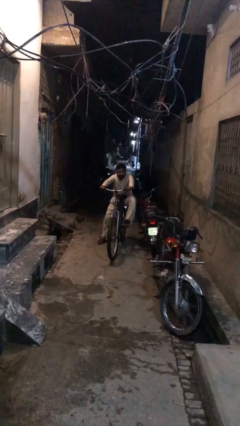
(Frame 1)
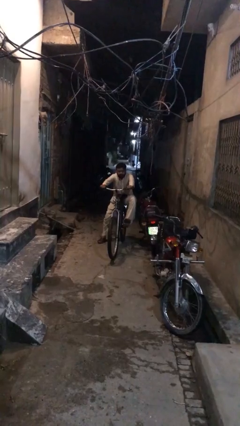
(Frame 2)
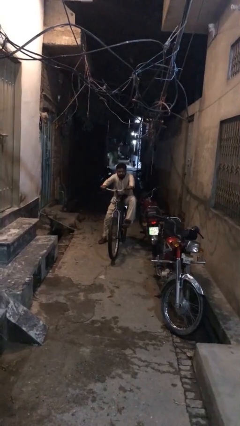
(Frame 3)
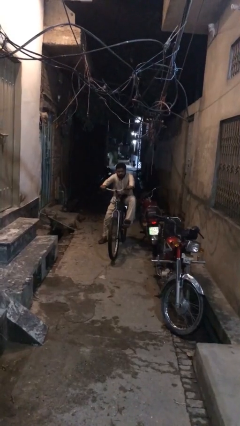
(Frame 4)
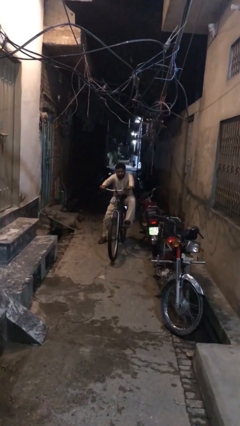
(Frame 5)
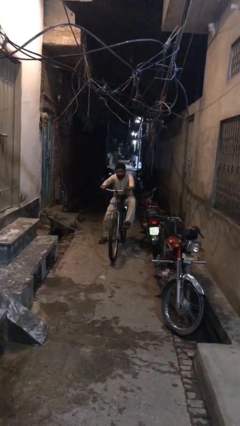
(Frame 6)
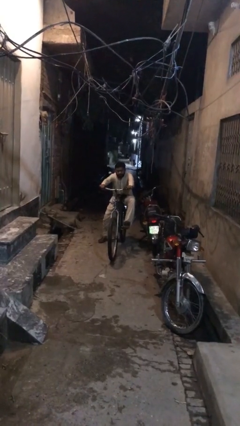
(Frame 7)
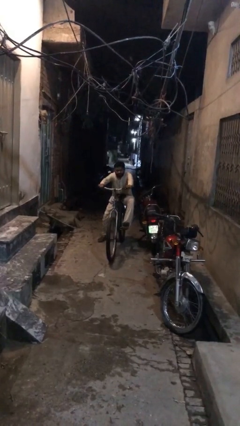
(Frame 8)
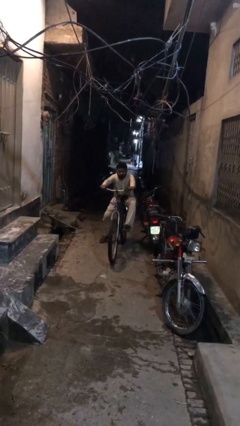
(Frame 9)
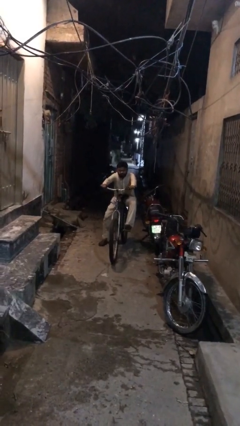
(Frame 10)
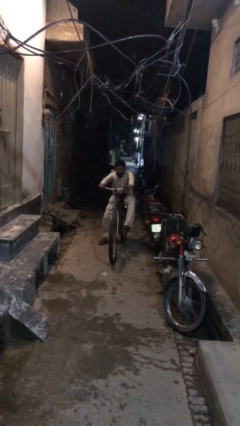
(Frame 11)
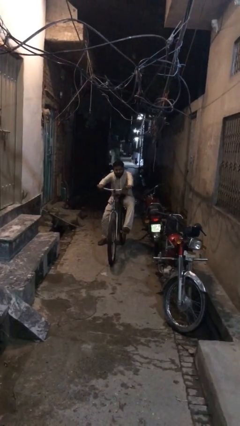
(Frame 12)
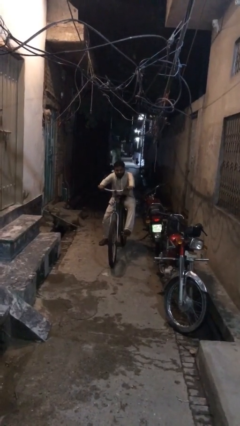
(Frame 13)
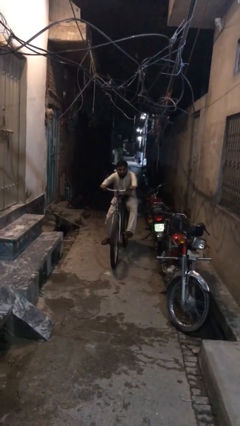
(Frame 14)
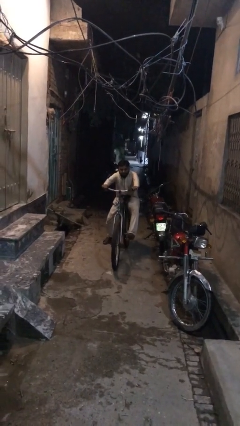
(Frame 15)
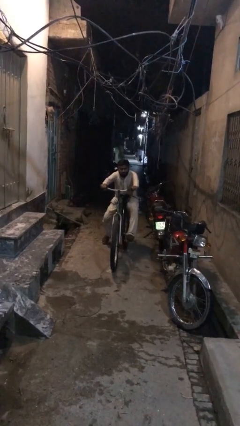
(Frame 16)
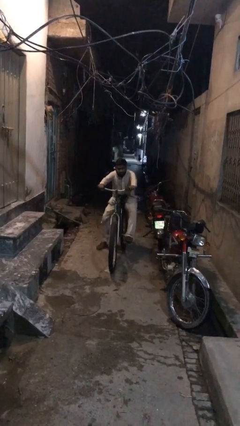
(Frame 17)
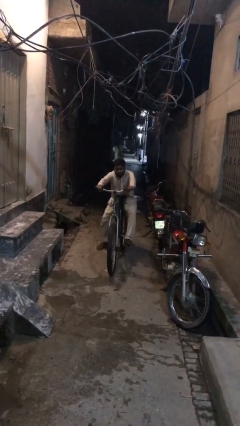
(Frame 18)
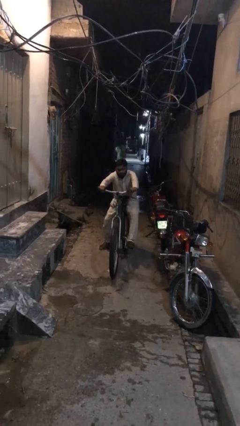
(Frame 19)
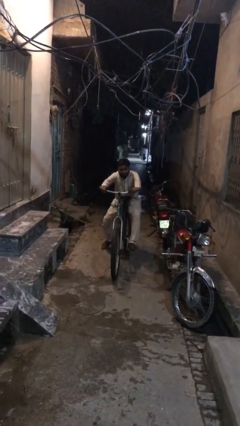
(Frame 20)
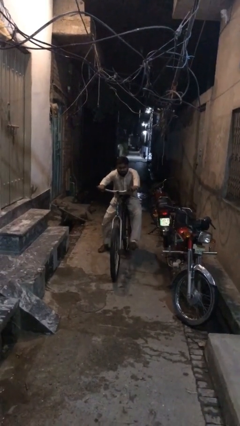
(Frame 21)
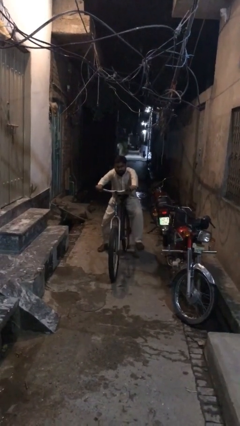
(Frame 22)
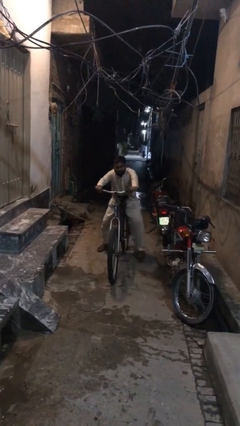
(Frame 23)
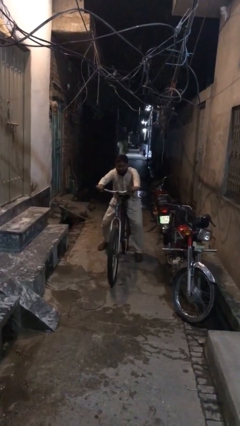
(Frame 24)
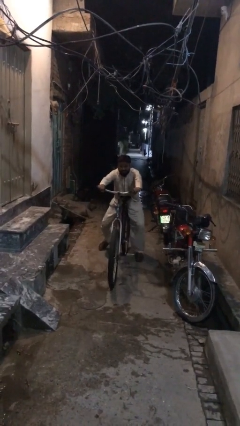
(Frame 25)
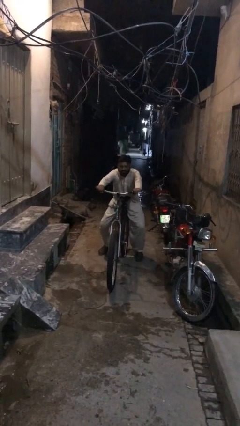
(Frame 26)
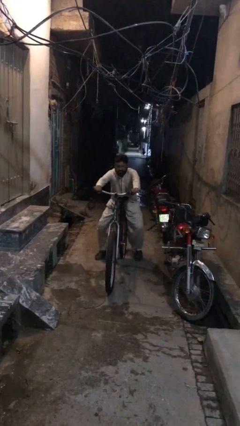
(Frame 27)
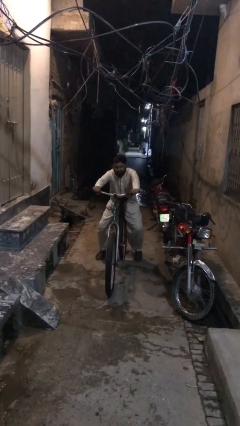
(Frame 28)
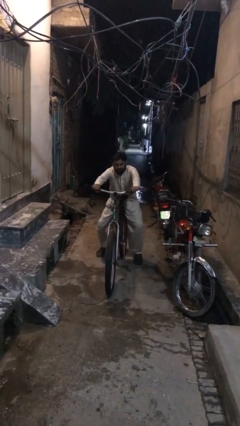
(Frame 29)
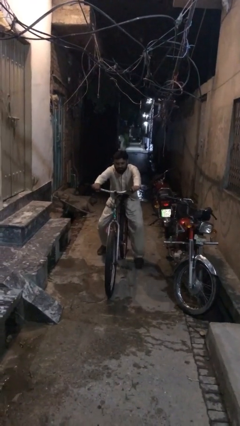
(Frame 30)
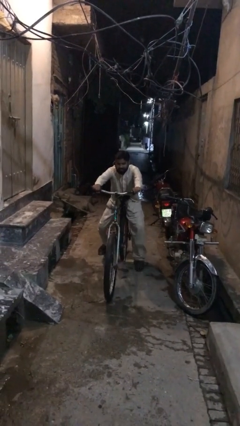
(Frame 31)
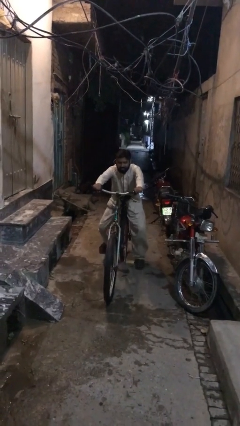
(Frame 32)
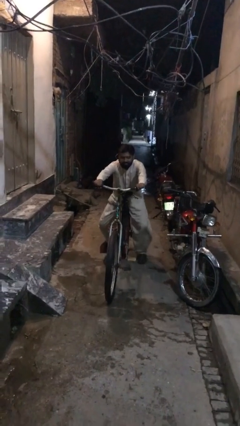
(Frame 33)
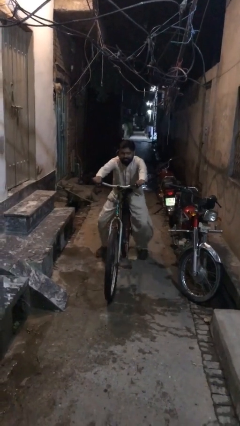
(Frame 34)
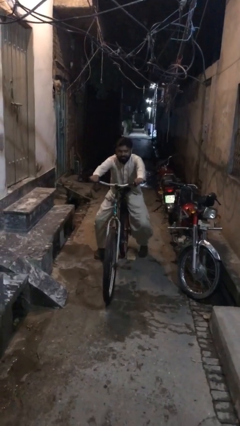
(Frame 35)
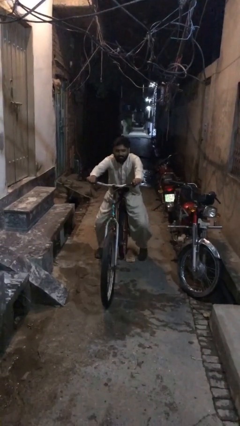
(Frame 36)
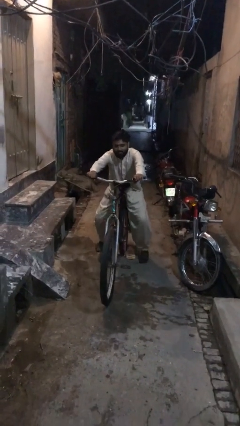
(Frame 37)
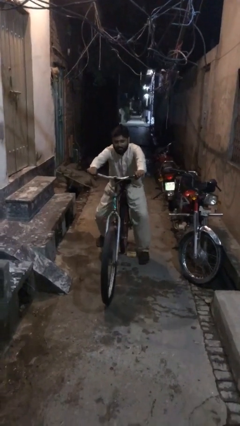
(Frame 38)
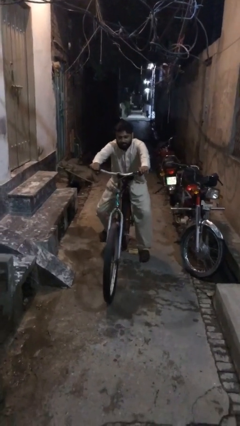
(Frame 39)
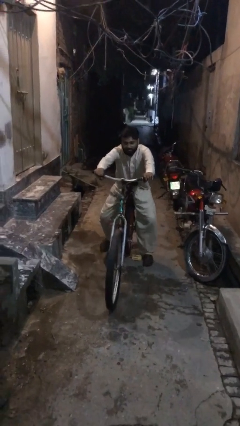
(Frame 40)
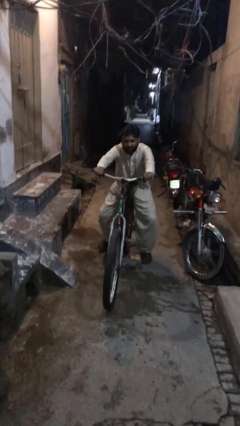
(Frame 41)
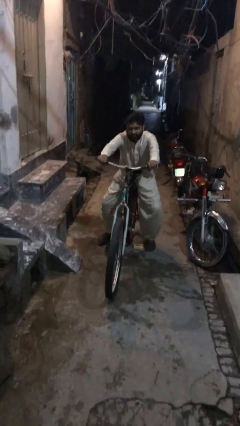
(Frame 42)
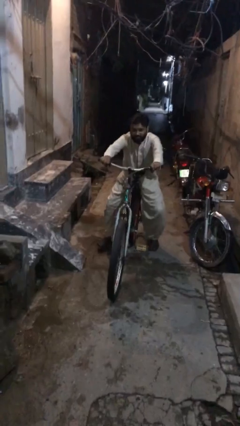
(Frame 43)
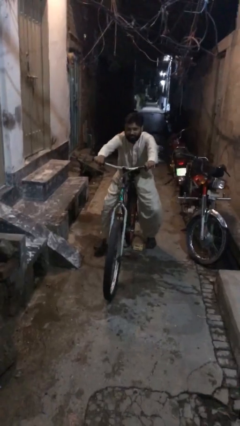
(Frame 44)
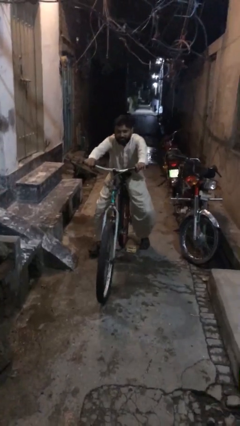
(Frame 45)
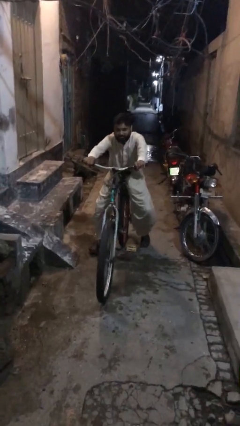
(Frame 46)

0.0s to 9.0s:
person rides bicycle

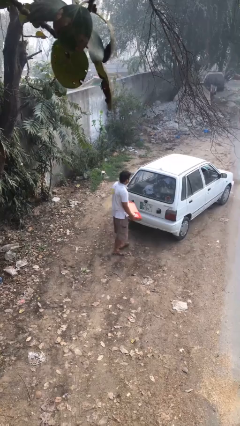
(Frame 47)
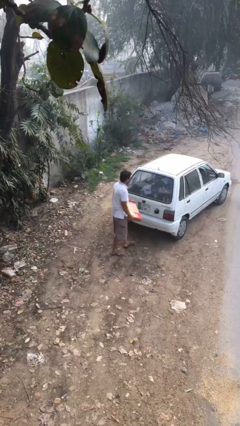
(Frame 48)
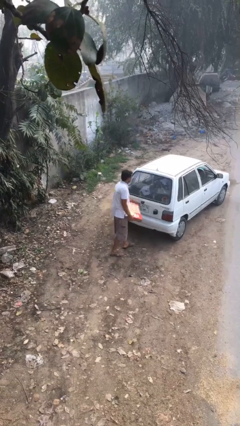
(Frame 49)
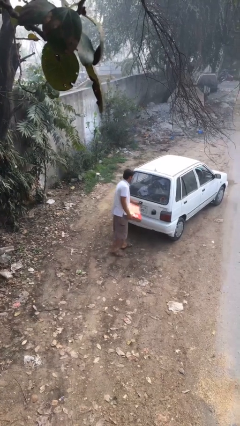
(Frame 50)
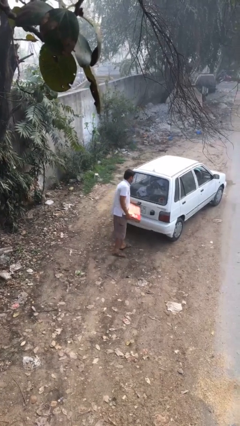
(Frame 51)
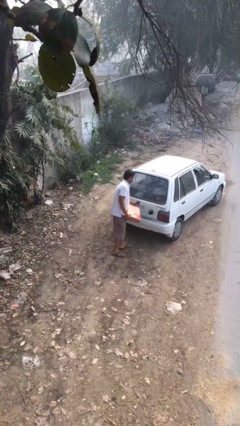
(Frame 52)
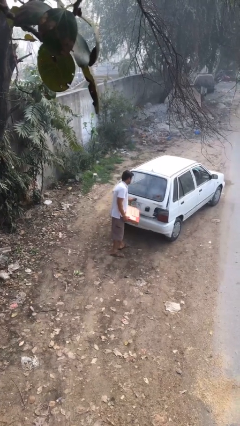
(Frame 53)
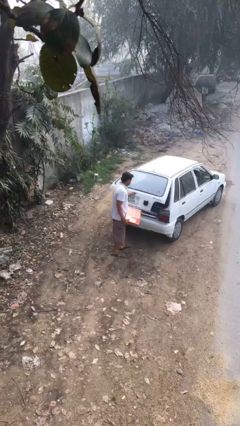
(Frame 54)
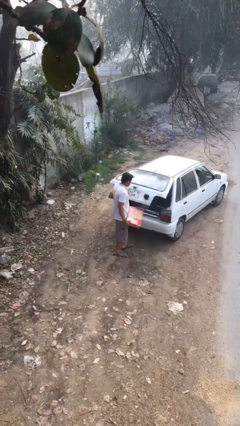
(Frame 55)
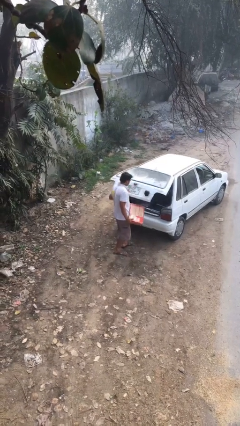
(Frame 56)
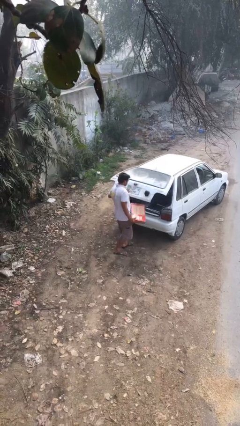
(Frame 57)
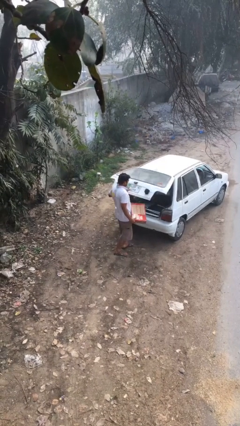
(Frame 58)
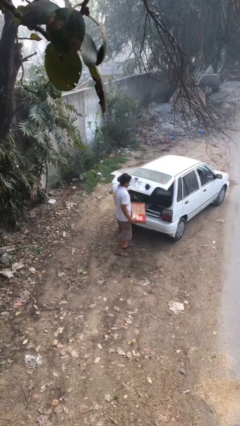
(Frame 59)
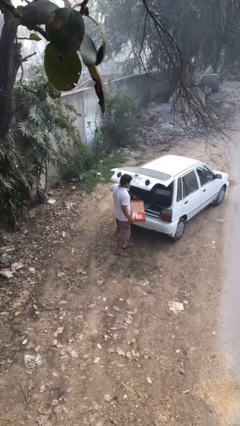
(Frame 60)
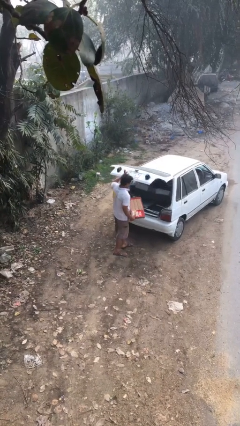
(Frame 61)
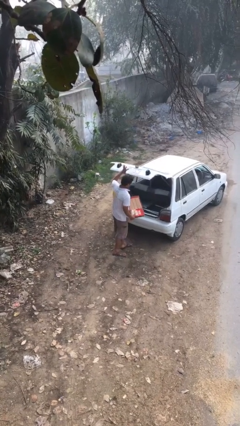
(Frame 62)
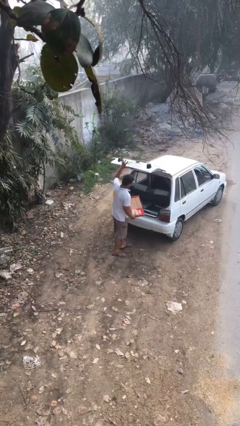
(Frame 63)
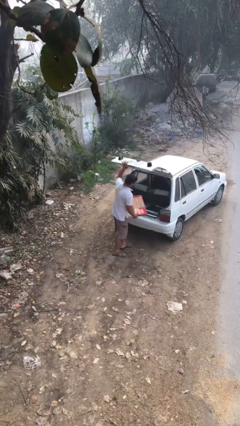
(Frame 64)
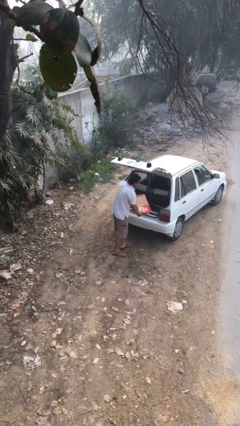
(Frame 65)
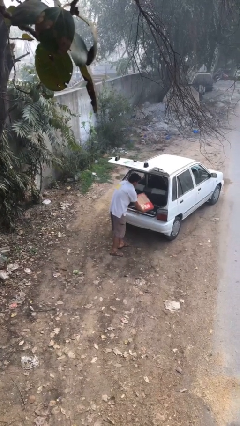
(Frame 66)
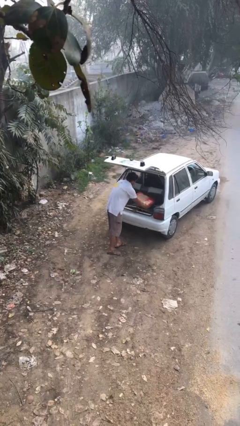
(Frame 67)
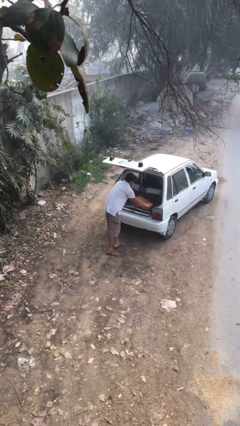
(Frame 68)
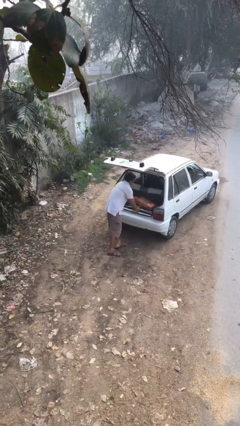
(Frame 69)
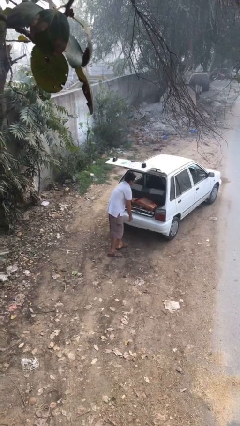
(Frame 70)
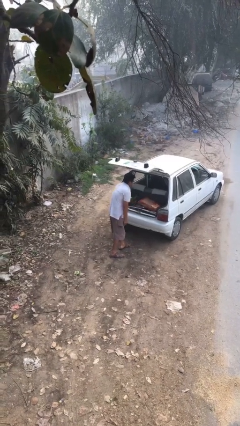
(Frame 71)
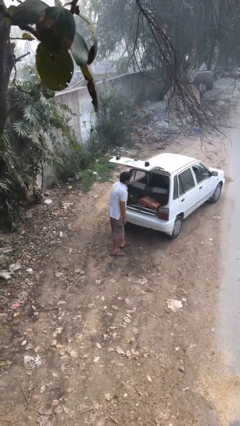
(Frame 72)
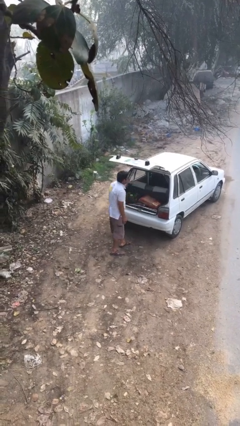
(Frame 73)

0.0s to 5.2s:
person loads car

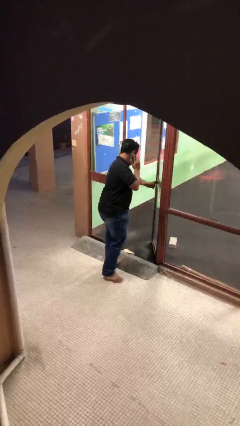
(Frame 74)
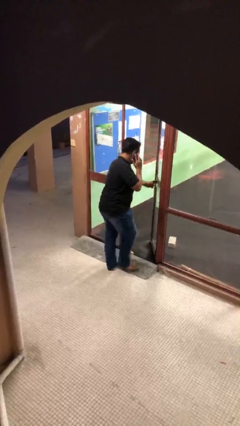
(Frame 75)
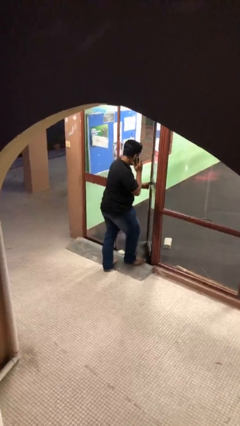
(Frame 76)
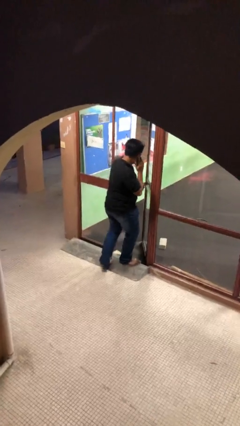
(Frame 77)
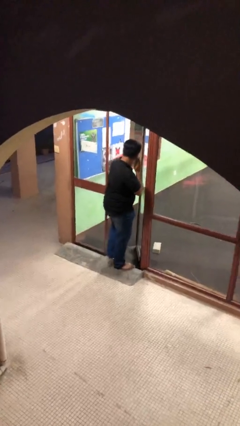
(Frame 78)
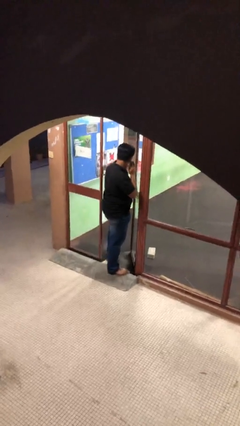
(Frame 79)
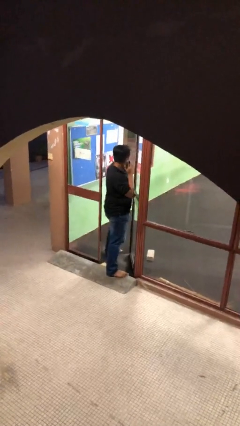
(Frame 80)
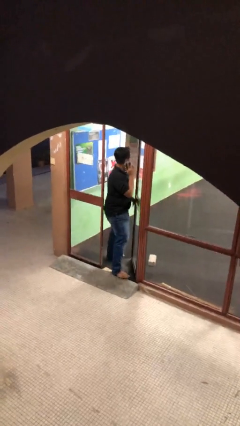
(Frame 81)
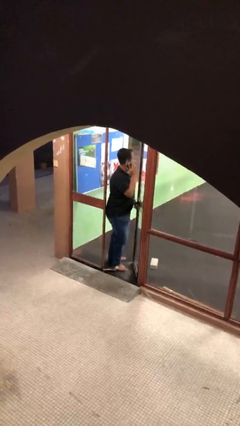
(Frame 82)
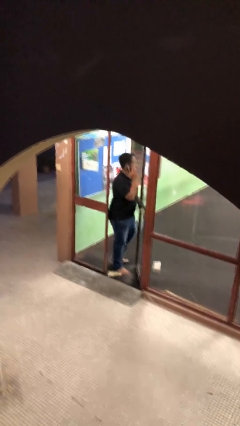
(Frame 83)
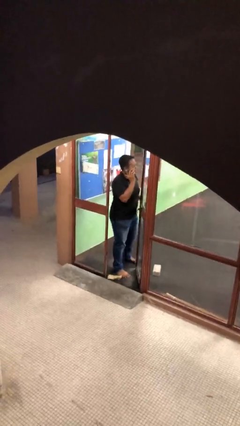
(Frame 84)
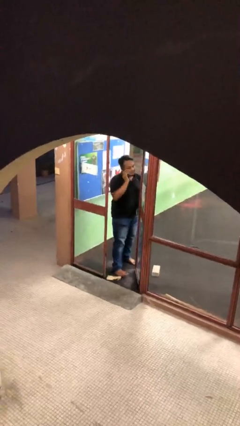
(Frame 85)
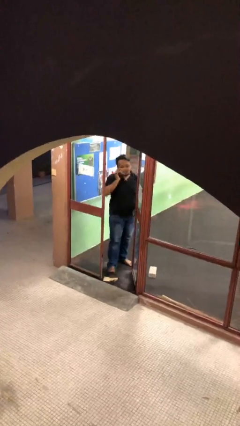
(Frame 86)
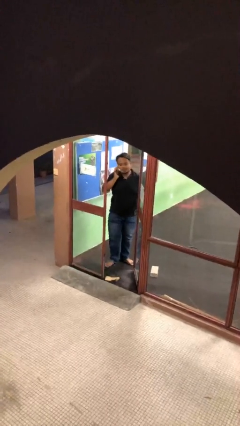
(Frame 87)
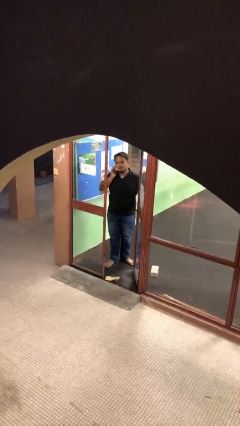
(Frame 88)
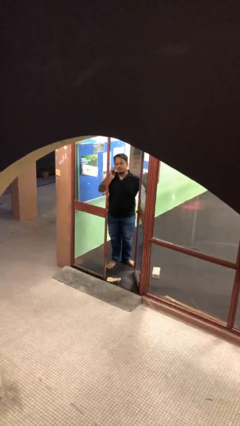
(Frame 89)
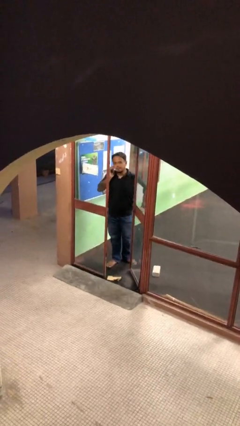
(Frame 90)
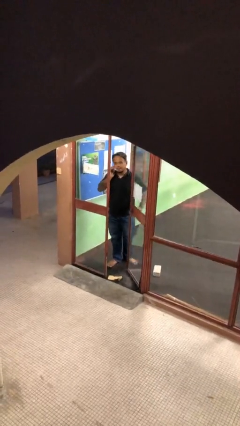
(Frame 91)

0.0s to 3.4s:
person exits scene through structure

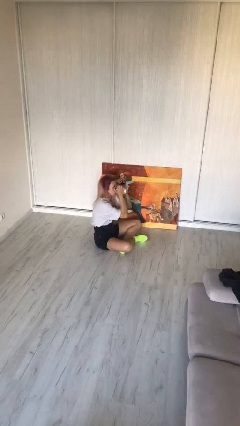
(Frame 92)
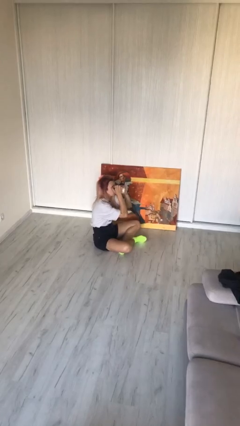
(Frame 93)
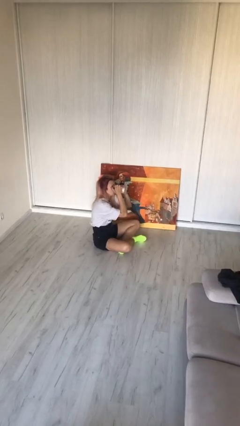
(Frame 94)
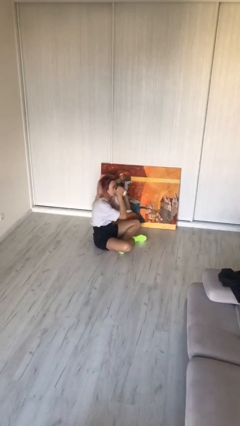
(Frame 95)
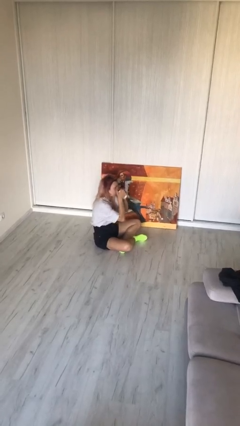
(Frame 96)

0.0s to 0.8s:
person drinks from mug
